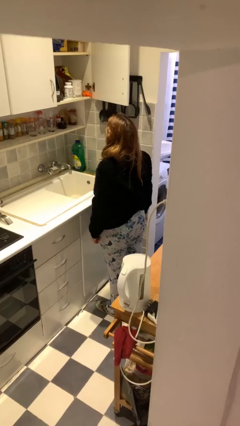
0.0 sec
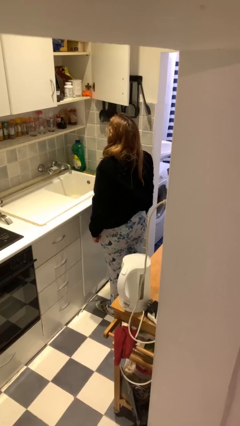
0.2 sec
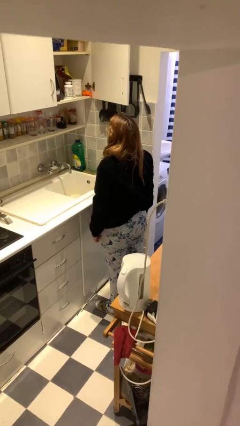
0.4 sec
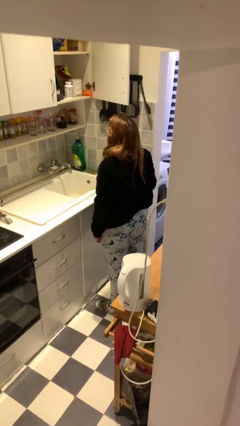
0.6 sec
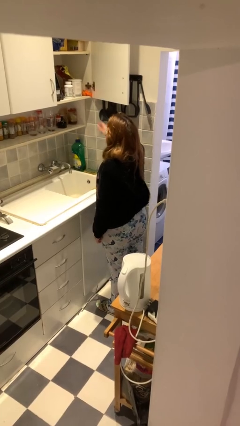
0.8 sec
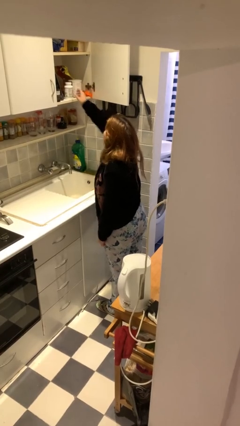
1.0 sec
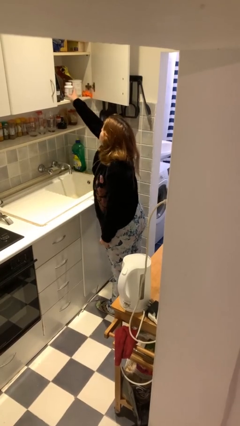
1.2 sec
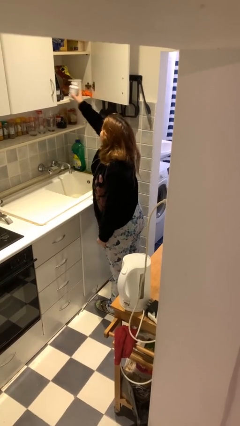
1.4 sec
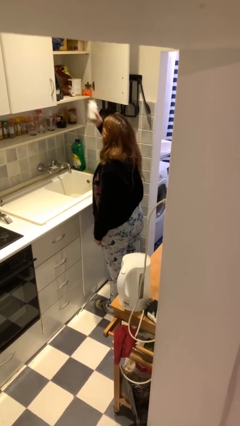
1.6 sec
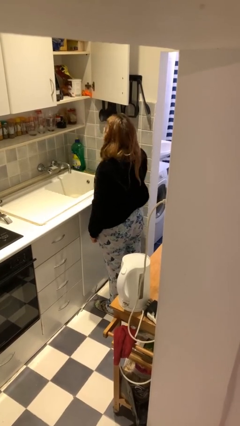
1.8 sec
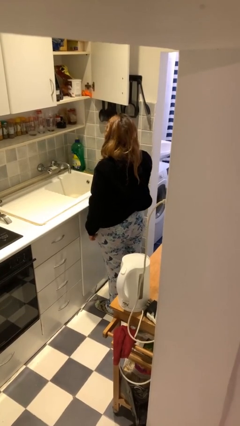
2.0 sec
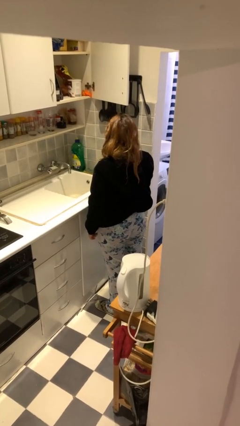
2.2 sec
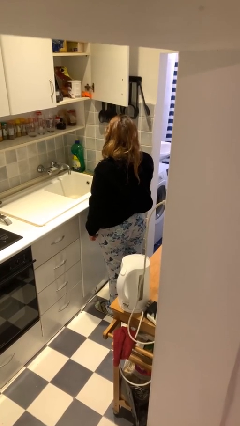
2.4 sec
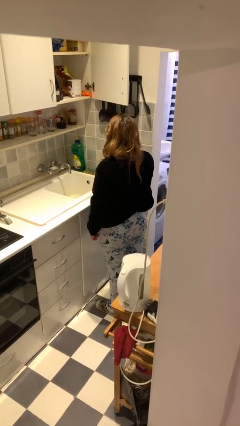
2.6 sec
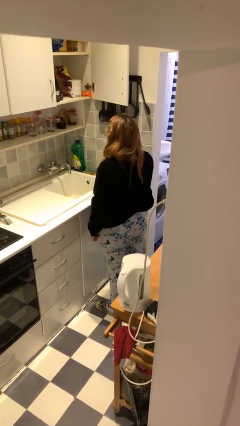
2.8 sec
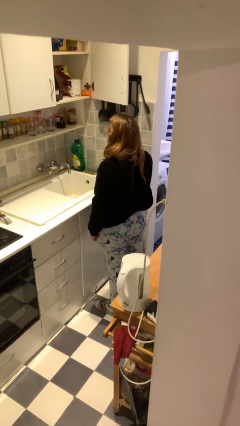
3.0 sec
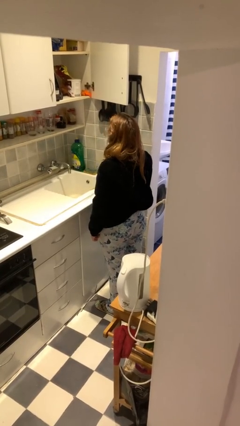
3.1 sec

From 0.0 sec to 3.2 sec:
person takes object from cabinet

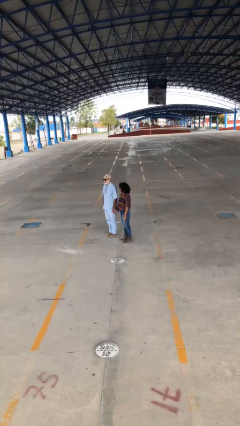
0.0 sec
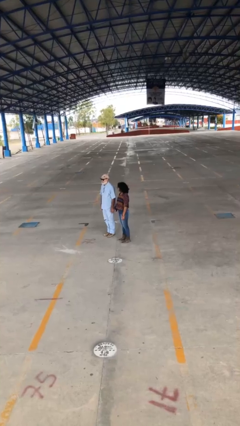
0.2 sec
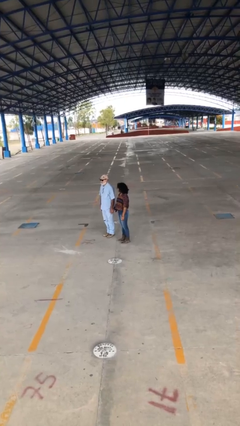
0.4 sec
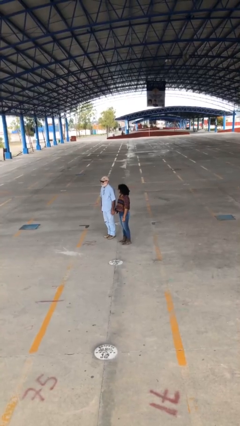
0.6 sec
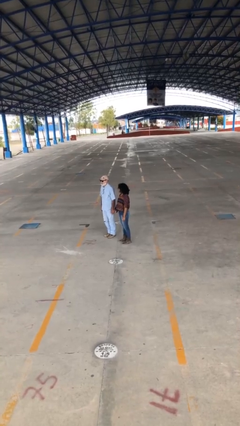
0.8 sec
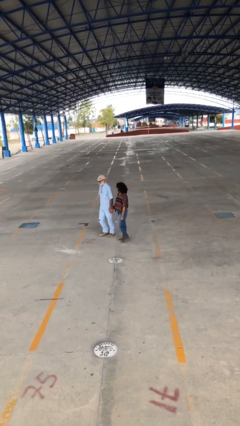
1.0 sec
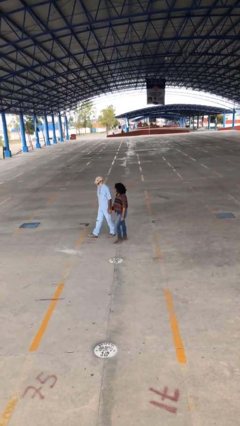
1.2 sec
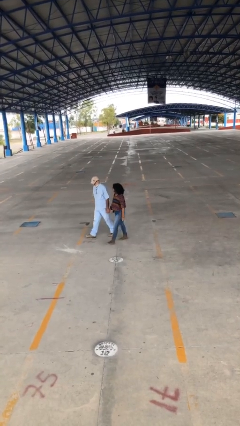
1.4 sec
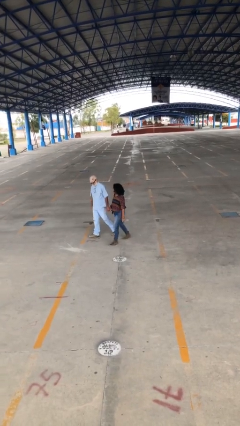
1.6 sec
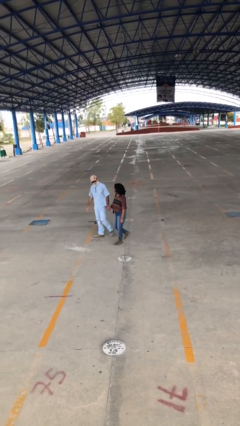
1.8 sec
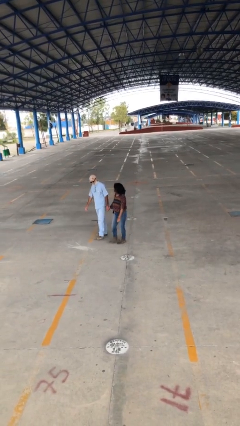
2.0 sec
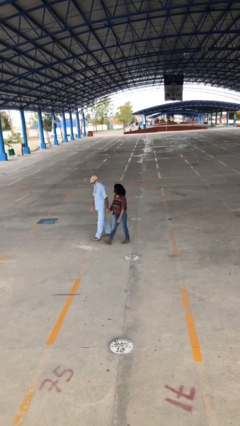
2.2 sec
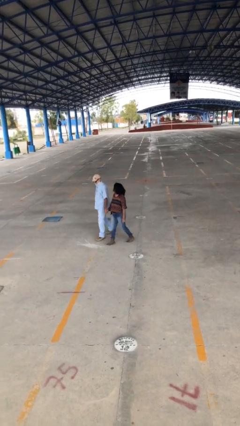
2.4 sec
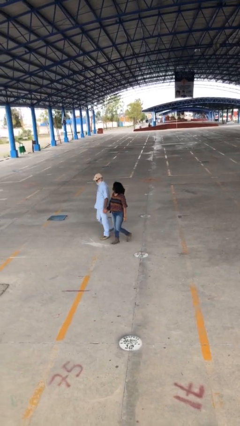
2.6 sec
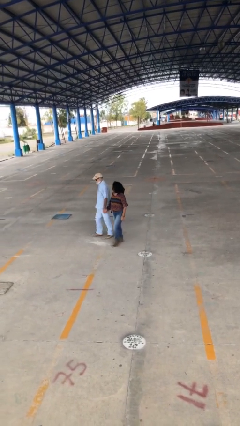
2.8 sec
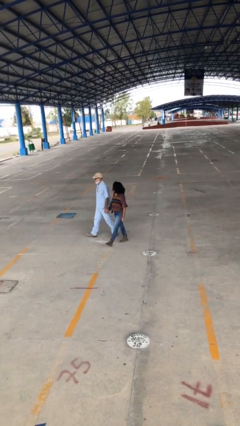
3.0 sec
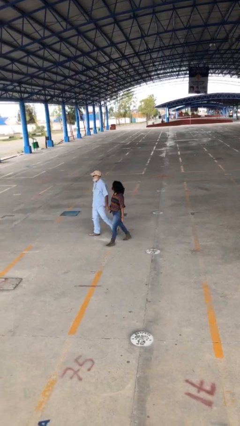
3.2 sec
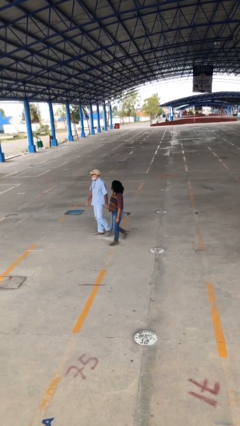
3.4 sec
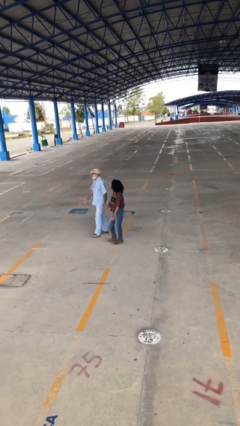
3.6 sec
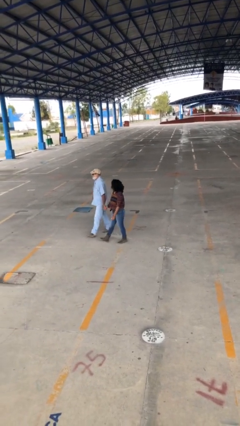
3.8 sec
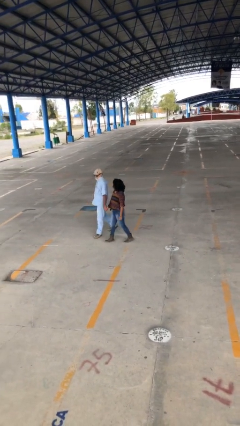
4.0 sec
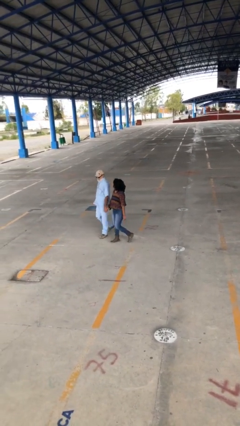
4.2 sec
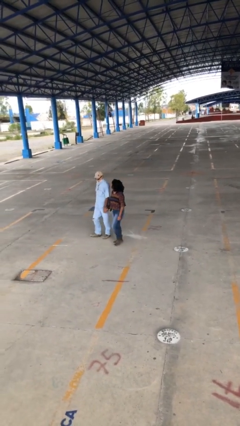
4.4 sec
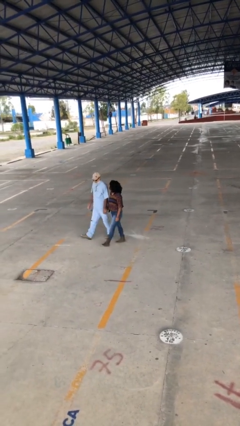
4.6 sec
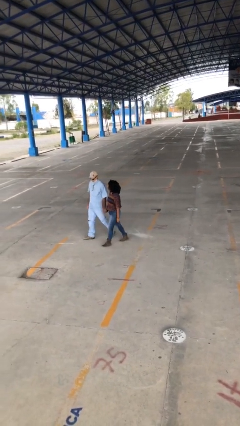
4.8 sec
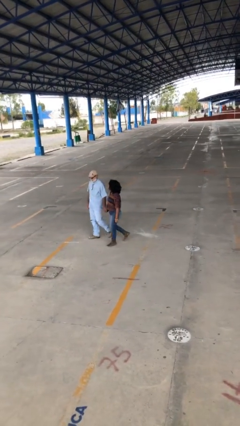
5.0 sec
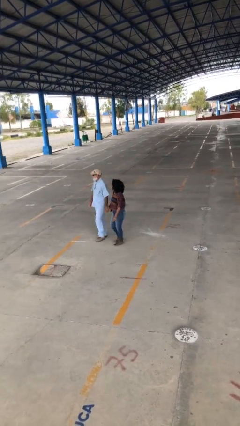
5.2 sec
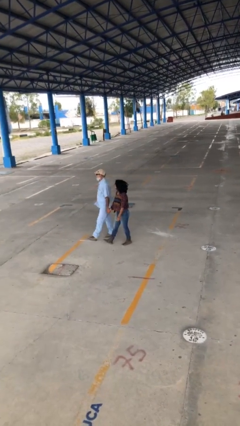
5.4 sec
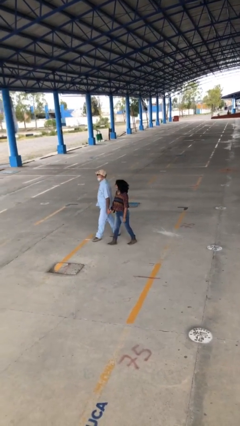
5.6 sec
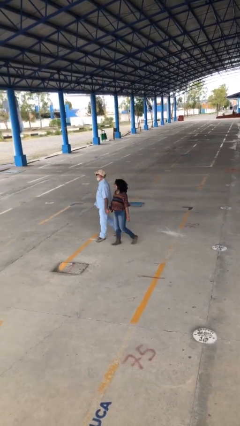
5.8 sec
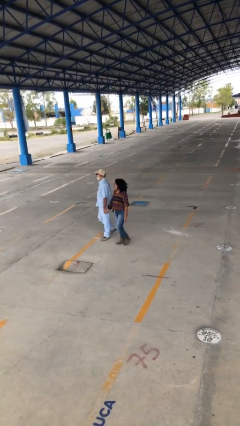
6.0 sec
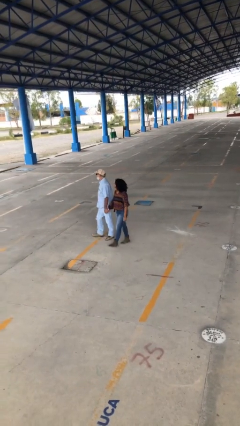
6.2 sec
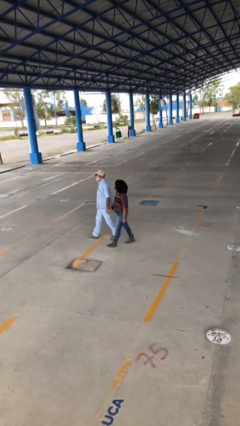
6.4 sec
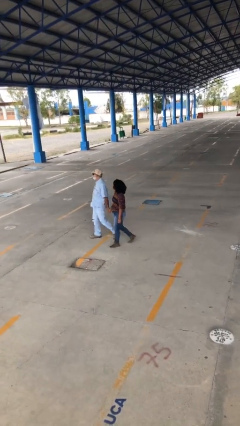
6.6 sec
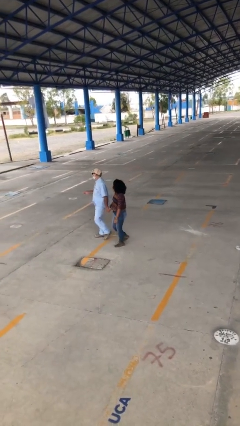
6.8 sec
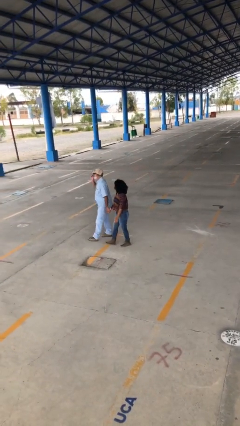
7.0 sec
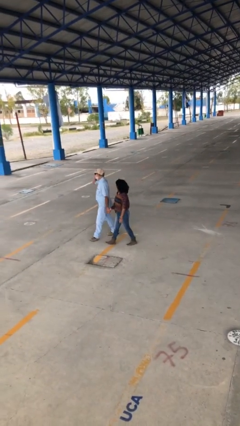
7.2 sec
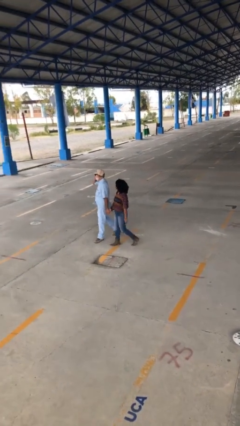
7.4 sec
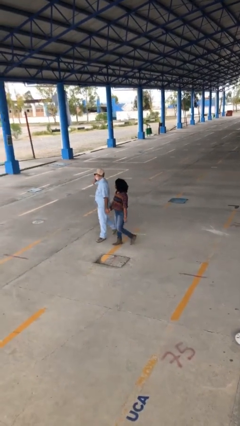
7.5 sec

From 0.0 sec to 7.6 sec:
person holds hand

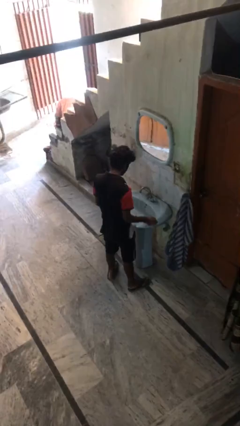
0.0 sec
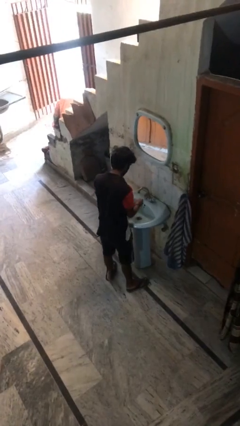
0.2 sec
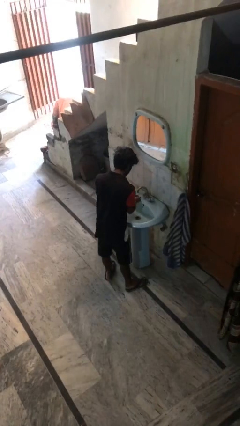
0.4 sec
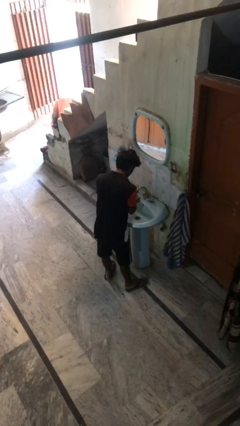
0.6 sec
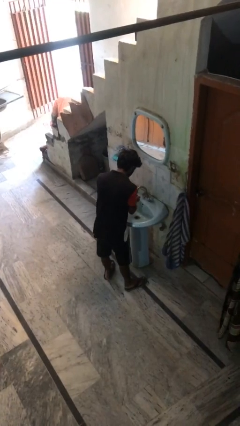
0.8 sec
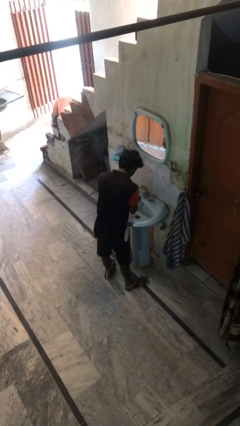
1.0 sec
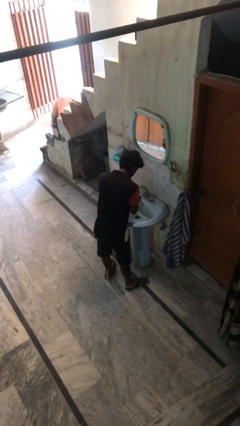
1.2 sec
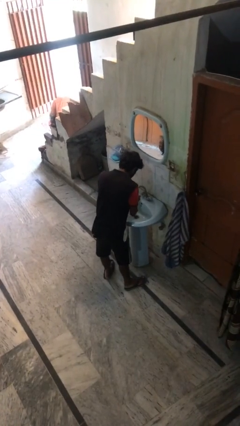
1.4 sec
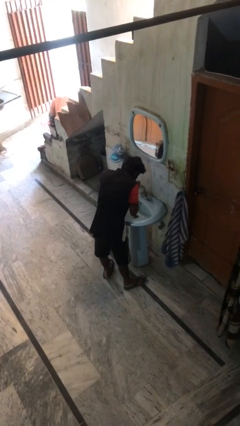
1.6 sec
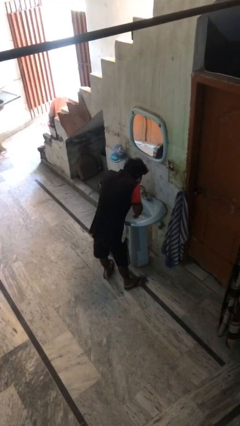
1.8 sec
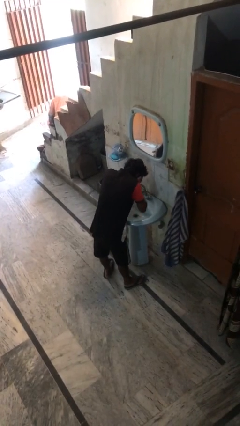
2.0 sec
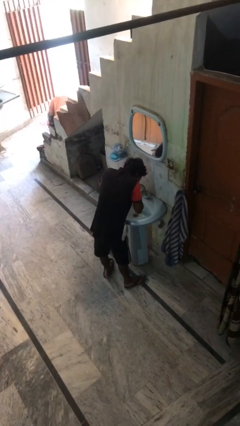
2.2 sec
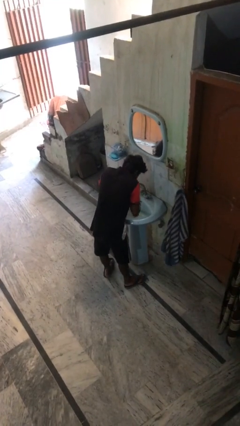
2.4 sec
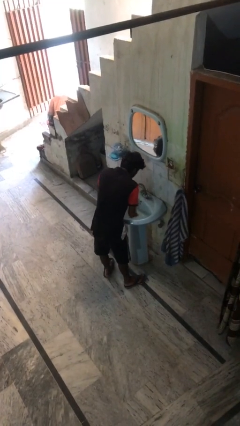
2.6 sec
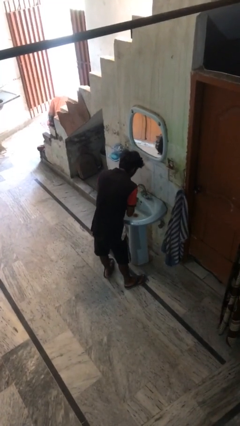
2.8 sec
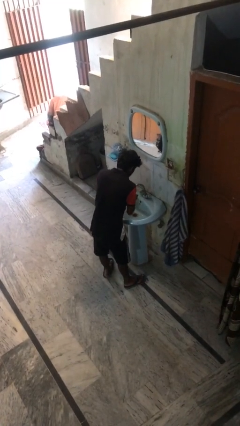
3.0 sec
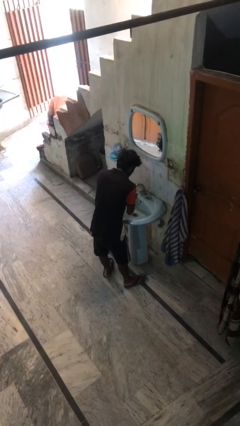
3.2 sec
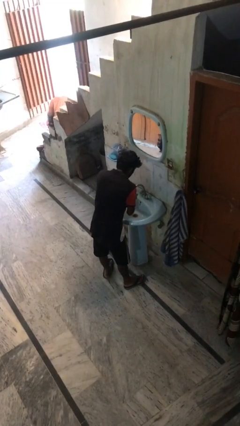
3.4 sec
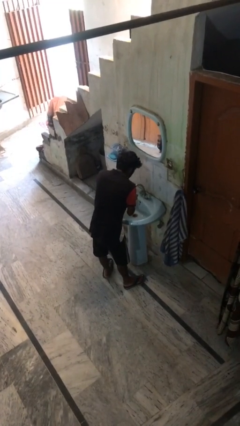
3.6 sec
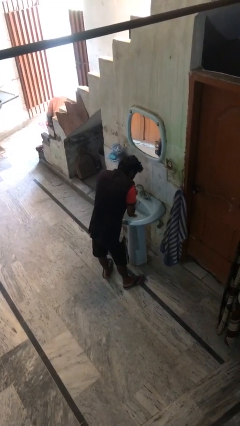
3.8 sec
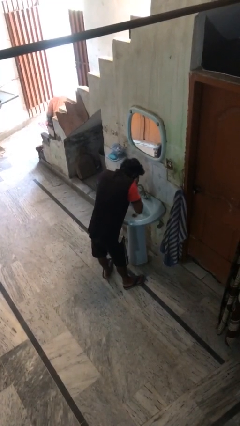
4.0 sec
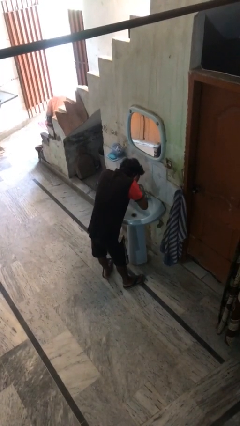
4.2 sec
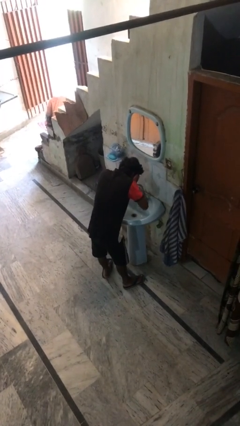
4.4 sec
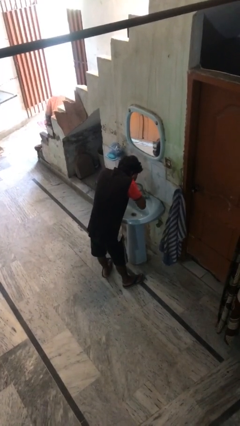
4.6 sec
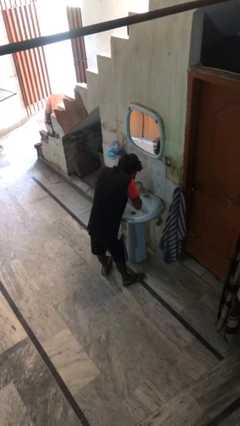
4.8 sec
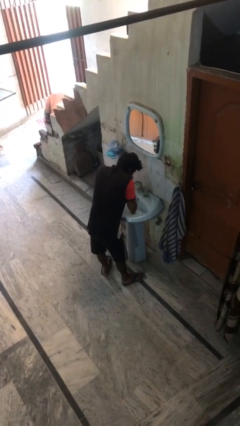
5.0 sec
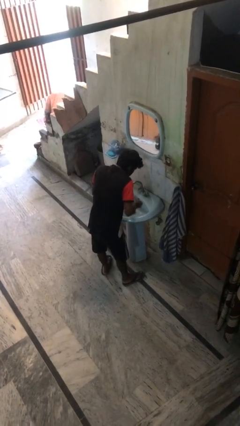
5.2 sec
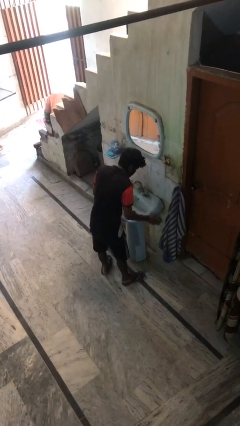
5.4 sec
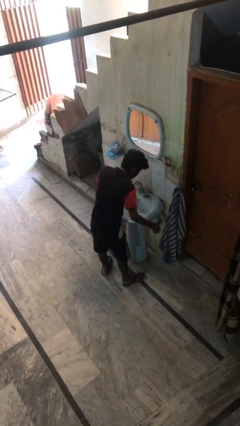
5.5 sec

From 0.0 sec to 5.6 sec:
person washes face

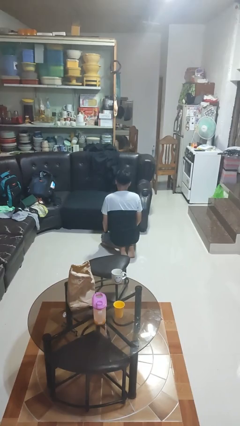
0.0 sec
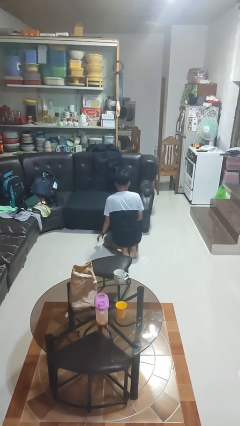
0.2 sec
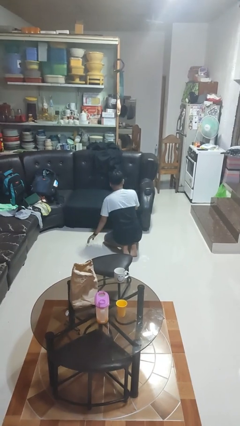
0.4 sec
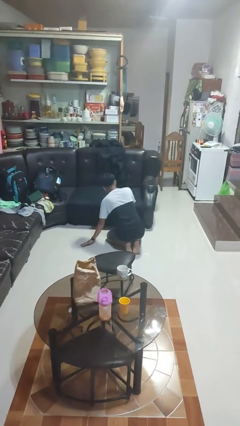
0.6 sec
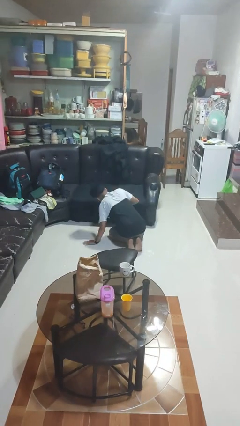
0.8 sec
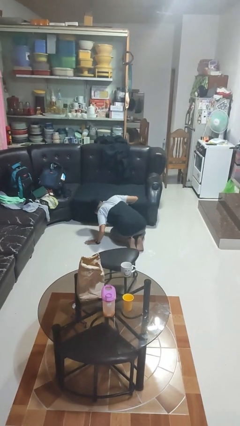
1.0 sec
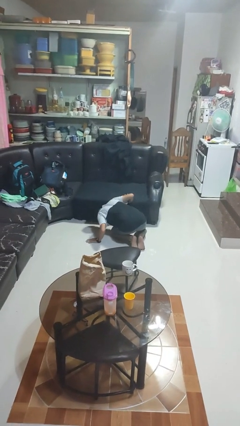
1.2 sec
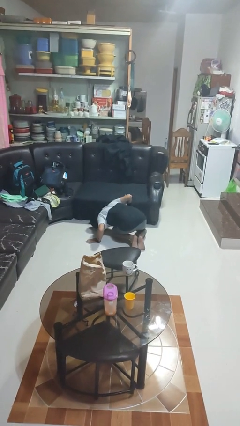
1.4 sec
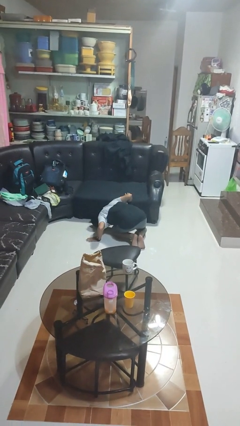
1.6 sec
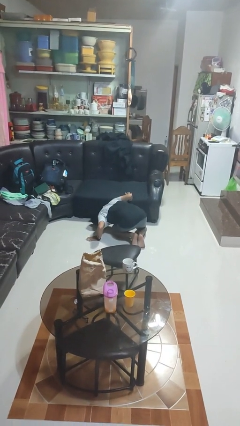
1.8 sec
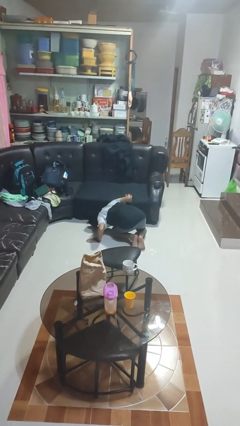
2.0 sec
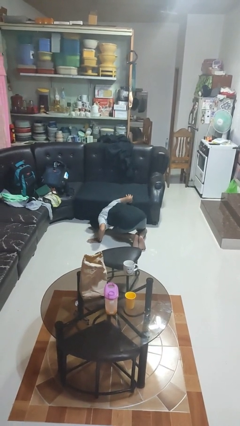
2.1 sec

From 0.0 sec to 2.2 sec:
person searches under couch
